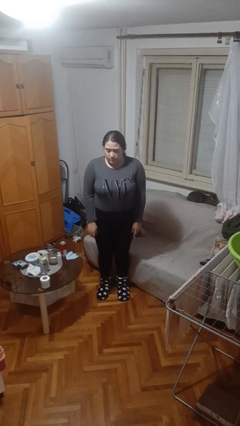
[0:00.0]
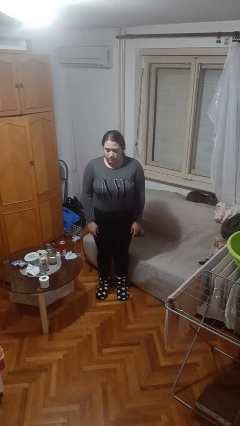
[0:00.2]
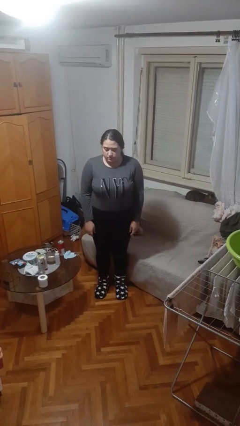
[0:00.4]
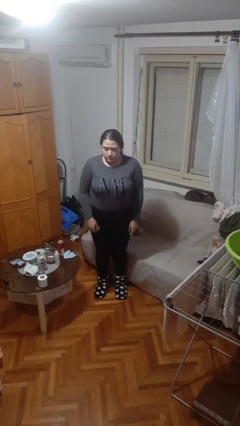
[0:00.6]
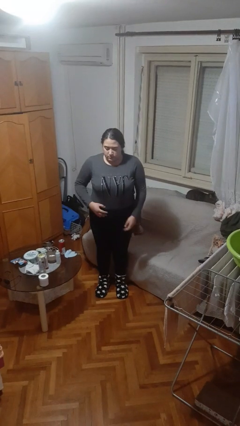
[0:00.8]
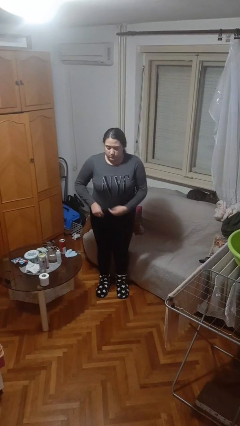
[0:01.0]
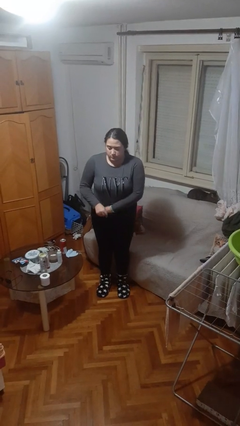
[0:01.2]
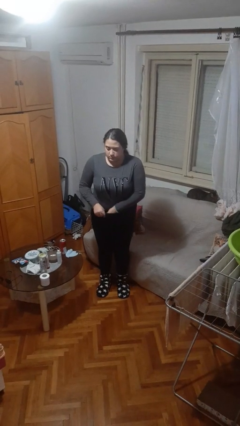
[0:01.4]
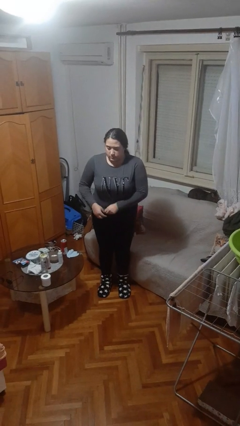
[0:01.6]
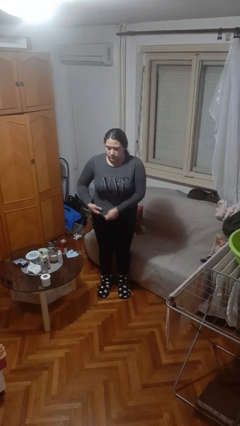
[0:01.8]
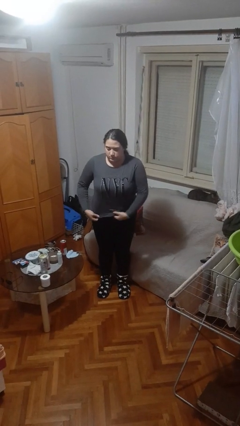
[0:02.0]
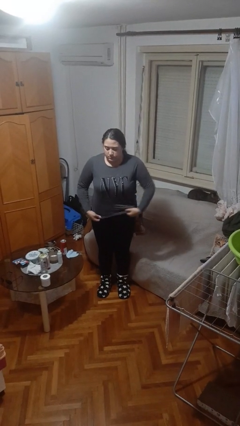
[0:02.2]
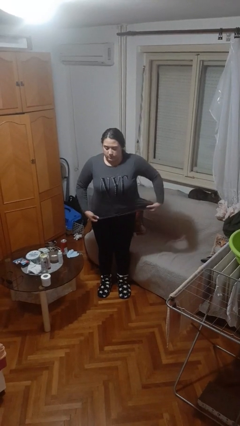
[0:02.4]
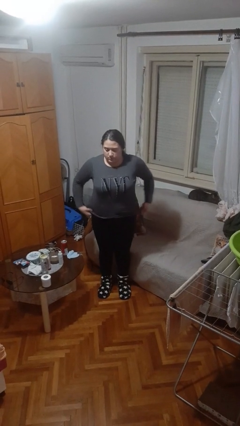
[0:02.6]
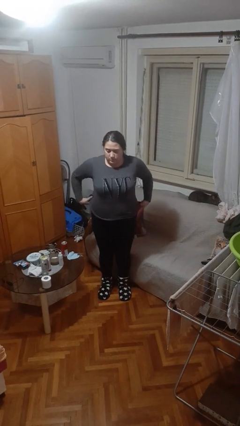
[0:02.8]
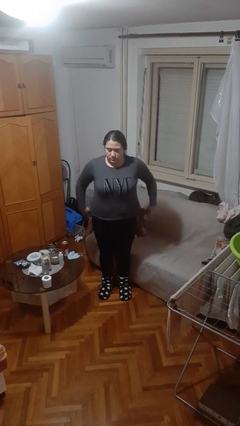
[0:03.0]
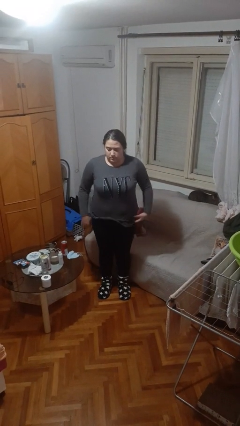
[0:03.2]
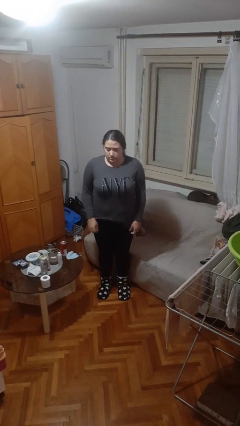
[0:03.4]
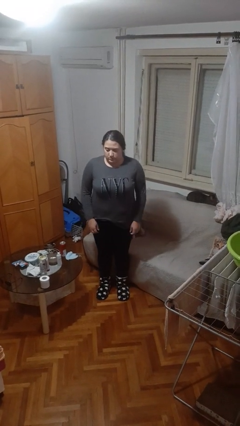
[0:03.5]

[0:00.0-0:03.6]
person untucks shirt

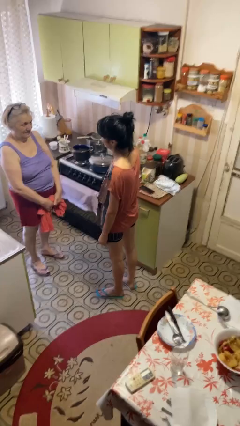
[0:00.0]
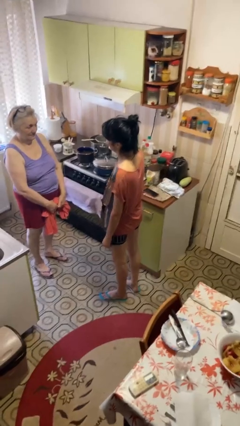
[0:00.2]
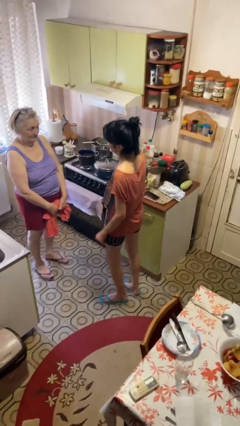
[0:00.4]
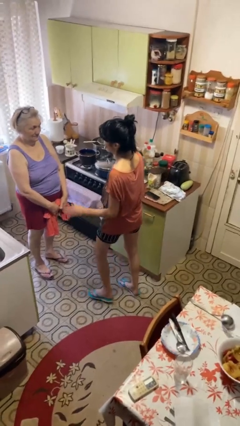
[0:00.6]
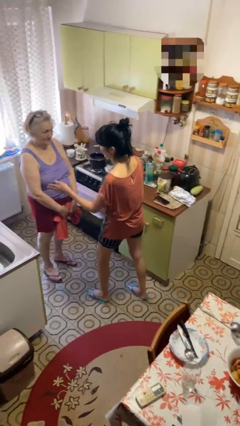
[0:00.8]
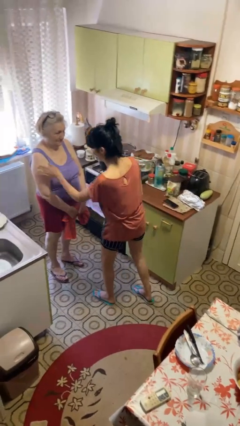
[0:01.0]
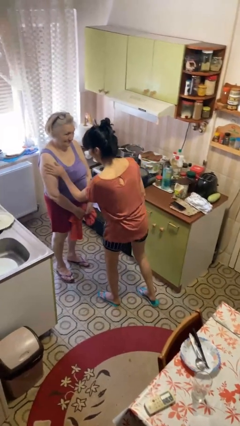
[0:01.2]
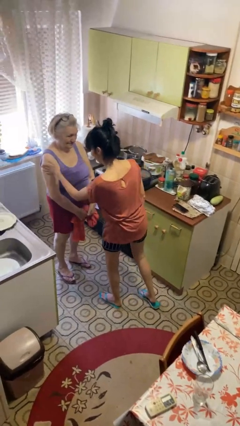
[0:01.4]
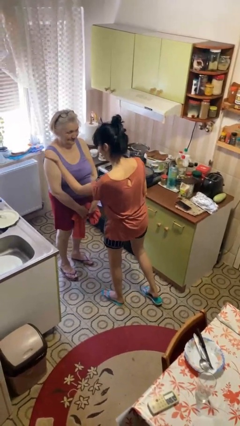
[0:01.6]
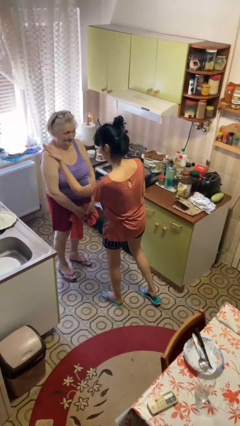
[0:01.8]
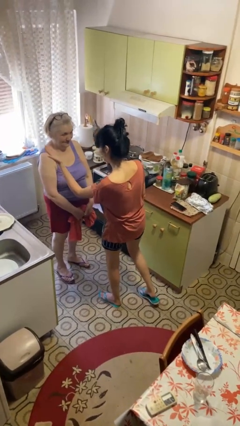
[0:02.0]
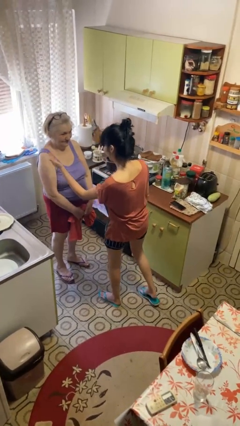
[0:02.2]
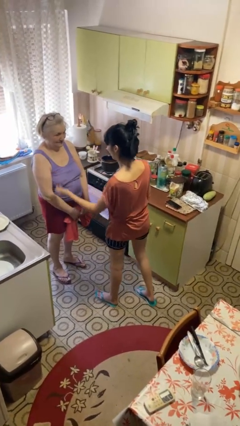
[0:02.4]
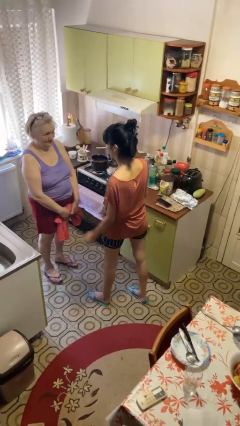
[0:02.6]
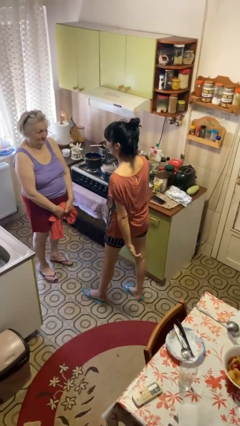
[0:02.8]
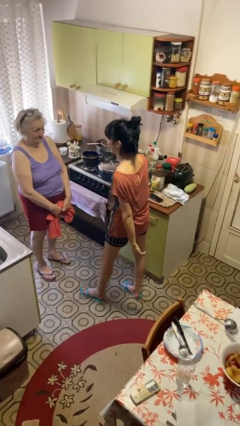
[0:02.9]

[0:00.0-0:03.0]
person shoves person

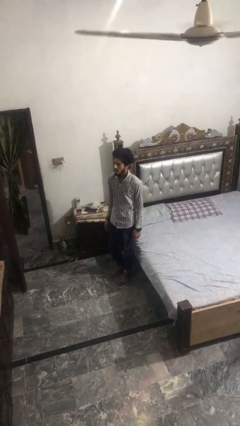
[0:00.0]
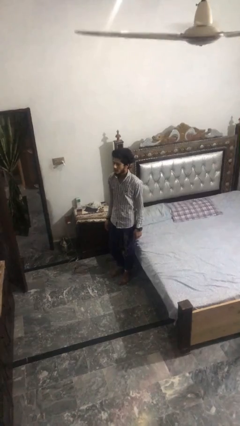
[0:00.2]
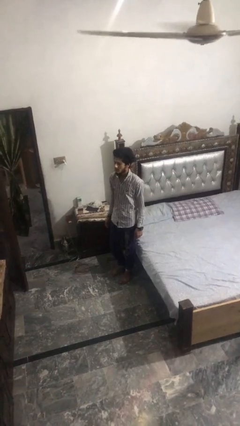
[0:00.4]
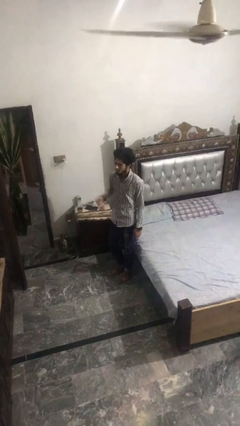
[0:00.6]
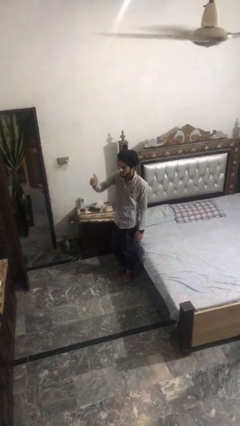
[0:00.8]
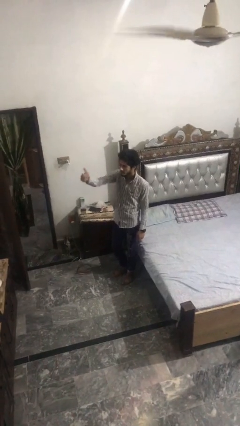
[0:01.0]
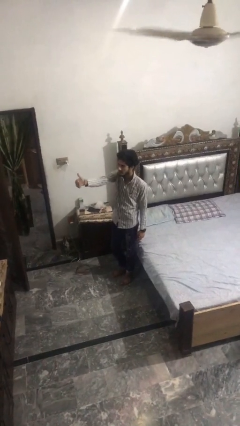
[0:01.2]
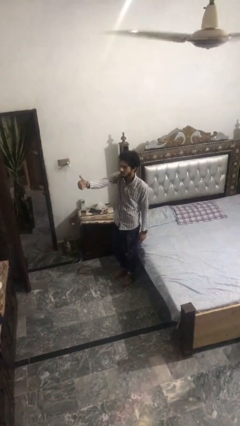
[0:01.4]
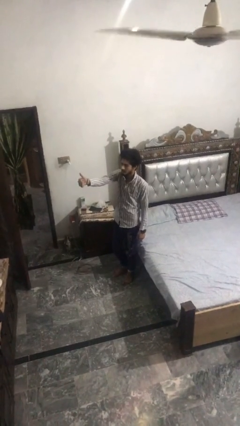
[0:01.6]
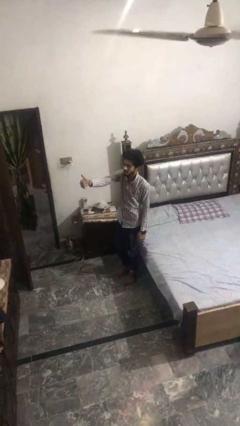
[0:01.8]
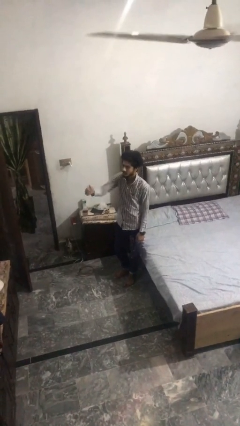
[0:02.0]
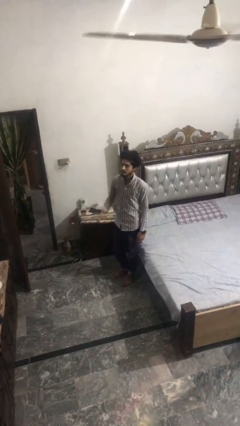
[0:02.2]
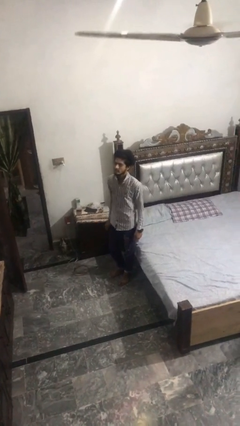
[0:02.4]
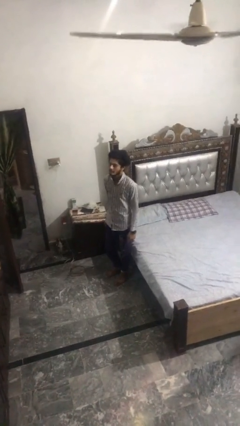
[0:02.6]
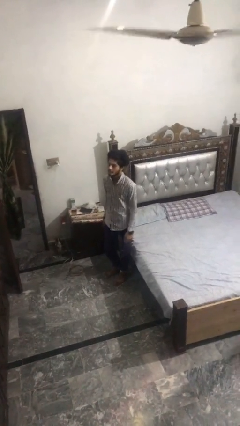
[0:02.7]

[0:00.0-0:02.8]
person gestures thumbs up

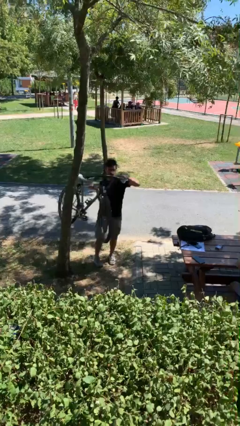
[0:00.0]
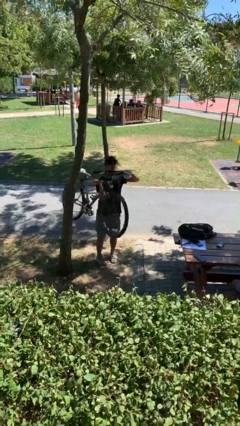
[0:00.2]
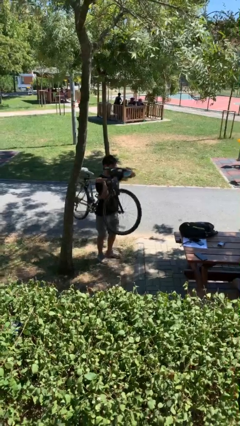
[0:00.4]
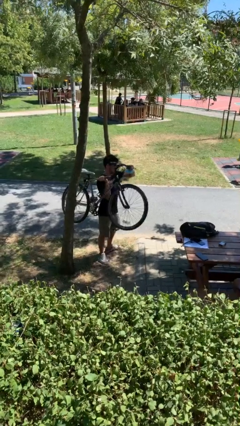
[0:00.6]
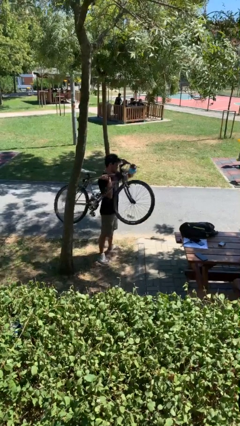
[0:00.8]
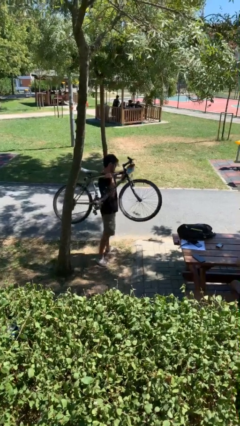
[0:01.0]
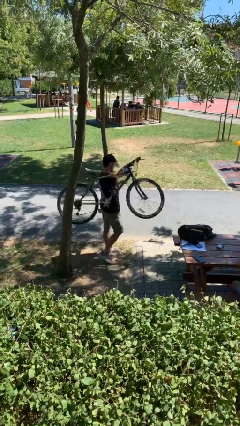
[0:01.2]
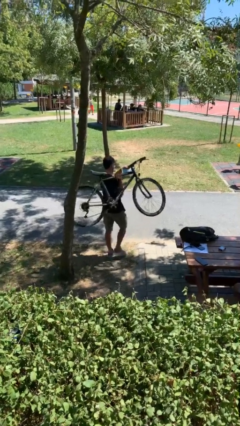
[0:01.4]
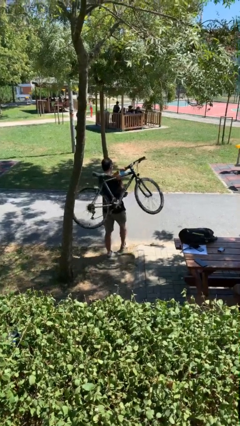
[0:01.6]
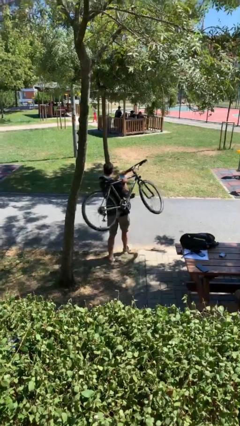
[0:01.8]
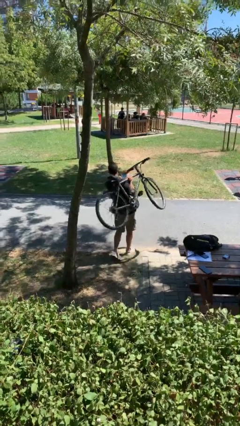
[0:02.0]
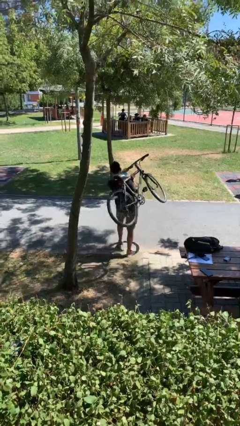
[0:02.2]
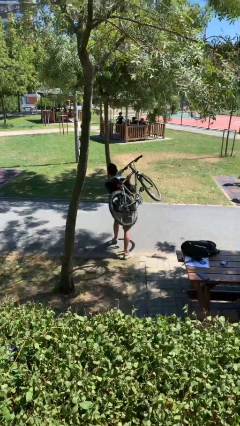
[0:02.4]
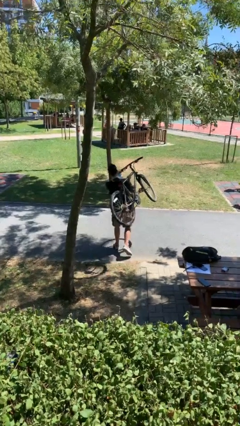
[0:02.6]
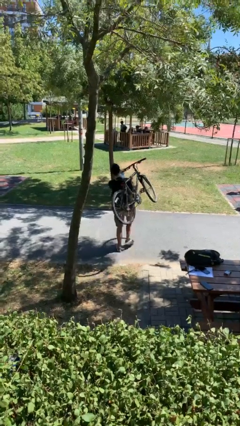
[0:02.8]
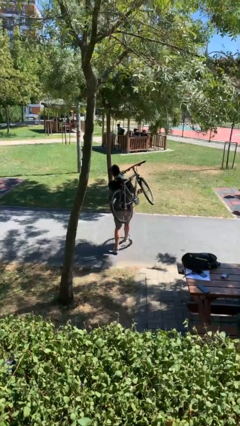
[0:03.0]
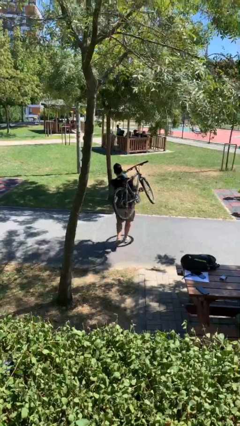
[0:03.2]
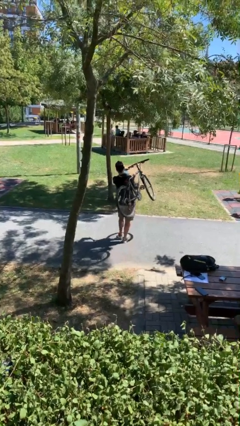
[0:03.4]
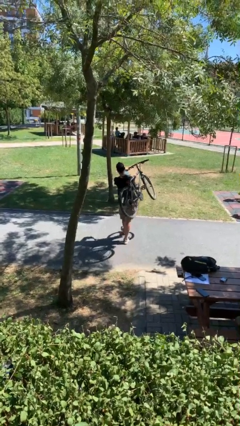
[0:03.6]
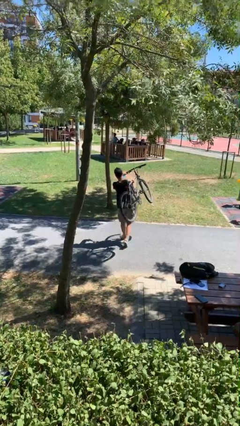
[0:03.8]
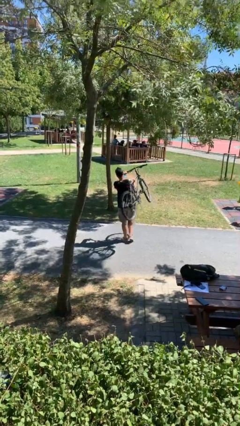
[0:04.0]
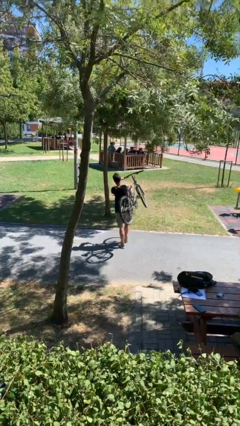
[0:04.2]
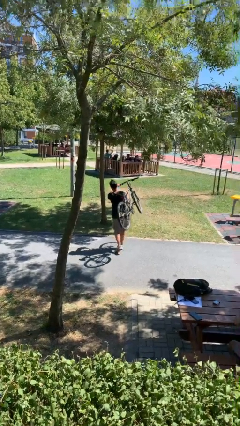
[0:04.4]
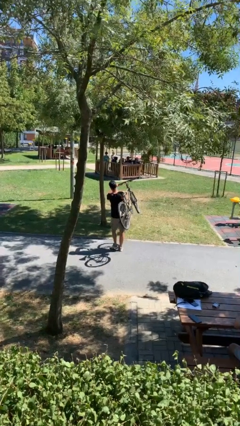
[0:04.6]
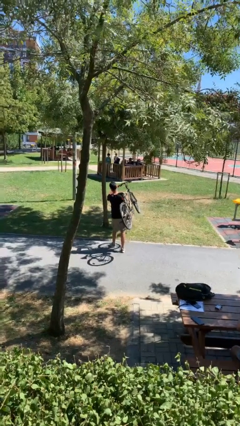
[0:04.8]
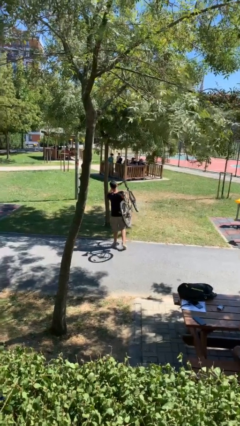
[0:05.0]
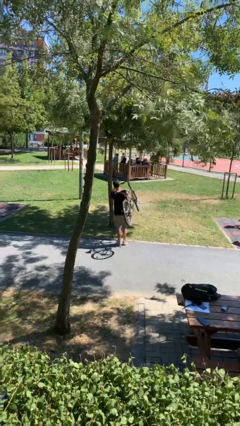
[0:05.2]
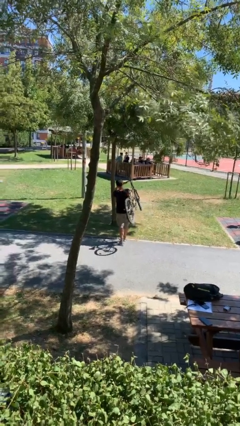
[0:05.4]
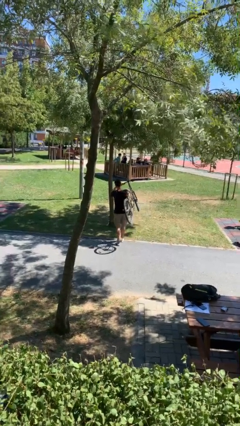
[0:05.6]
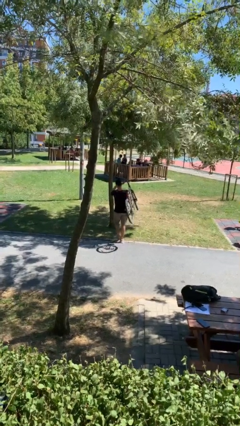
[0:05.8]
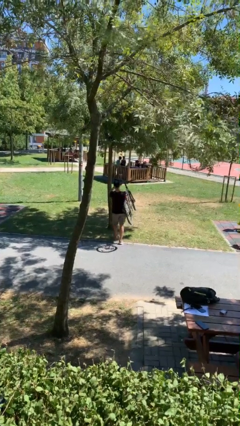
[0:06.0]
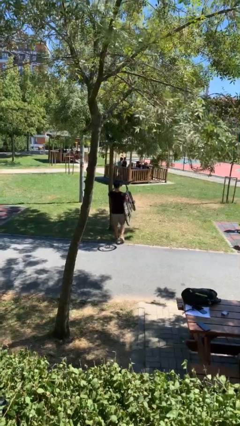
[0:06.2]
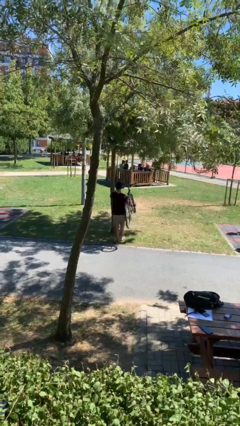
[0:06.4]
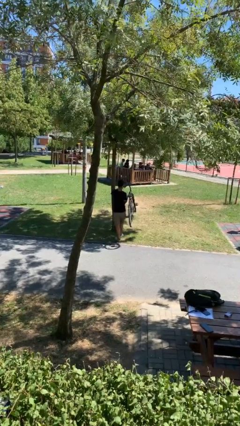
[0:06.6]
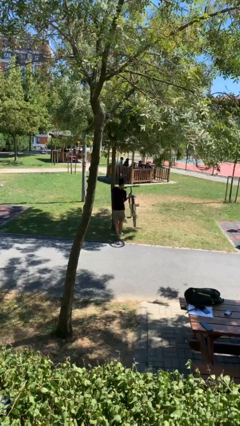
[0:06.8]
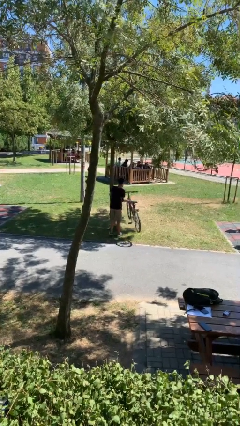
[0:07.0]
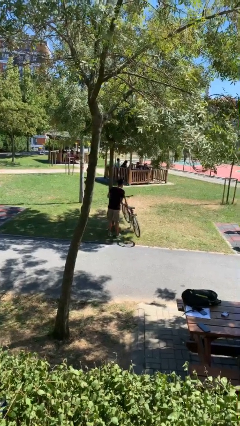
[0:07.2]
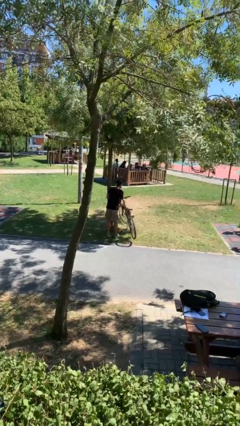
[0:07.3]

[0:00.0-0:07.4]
person carries heavy object

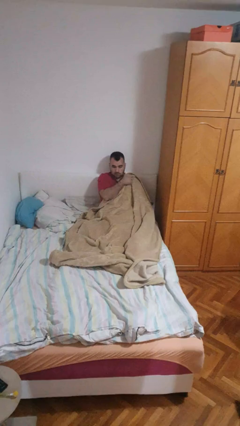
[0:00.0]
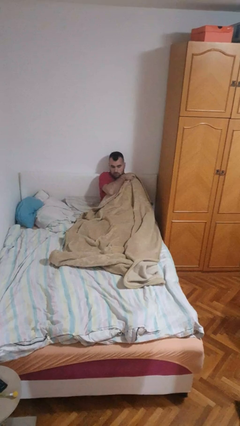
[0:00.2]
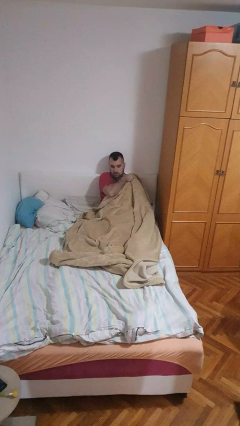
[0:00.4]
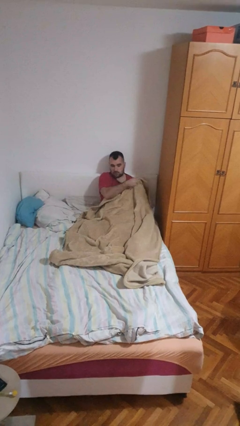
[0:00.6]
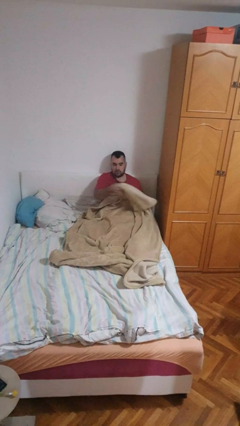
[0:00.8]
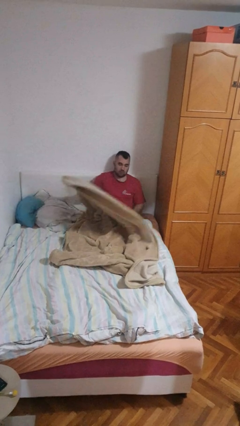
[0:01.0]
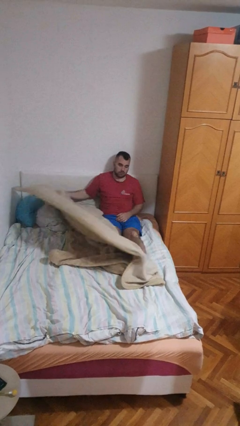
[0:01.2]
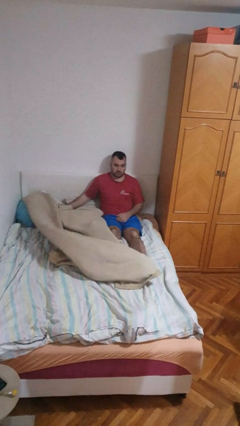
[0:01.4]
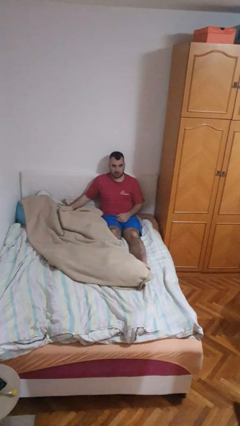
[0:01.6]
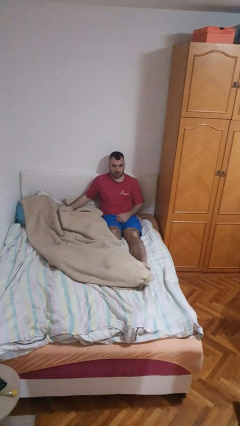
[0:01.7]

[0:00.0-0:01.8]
person uncovers with blanket
